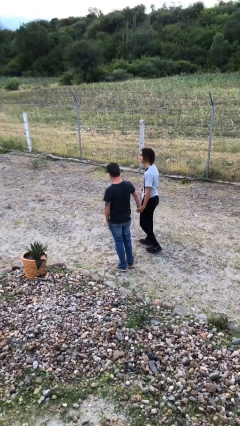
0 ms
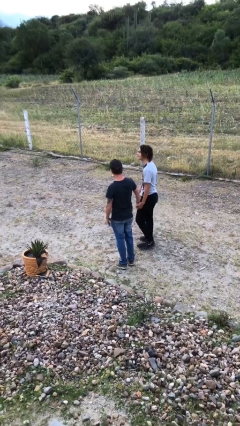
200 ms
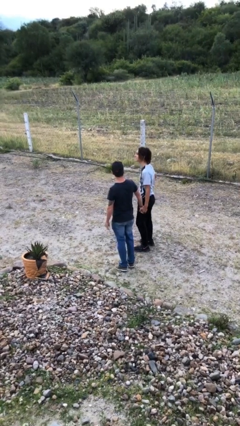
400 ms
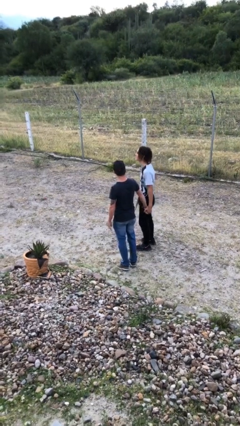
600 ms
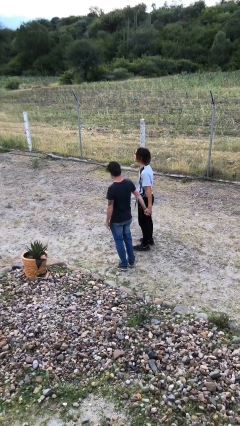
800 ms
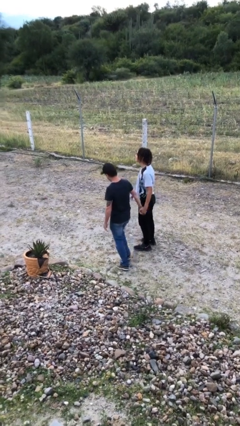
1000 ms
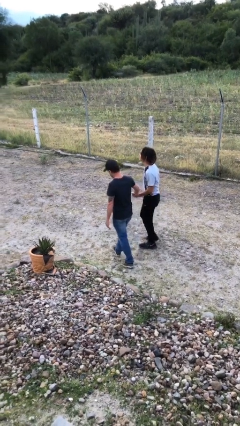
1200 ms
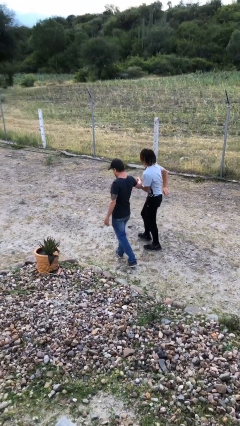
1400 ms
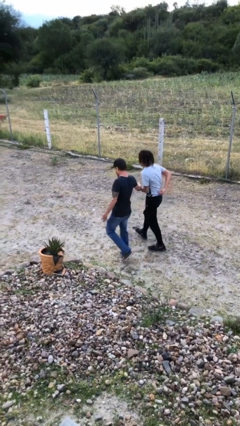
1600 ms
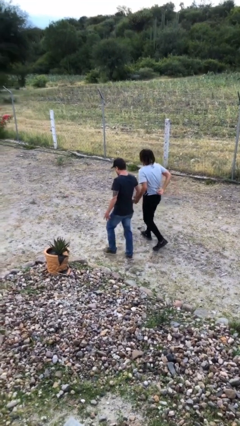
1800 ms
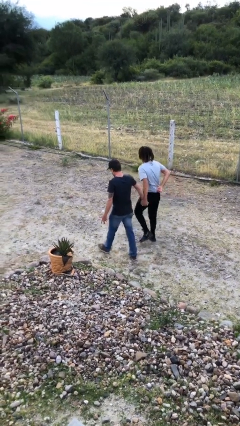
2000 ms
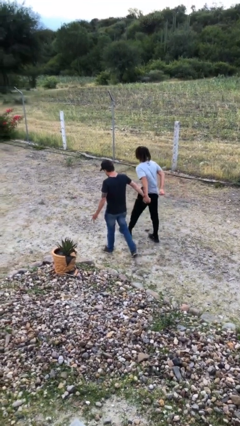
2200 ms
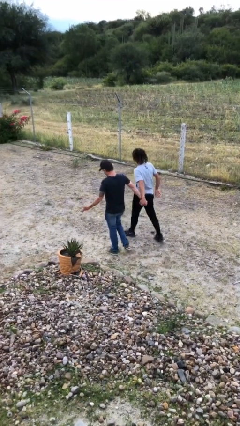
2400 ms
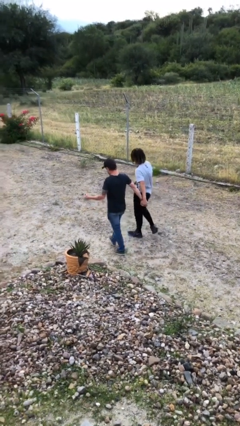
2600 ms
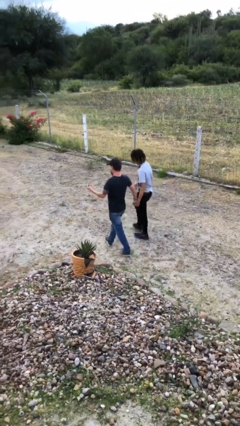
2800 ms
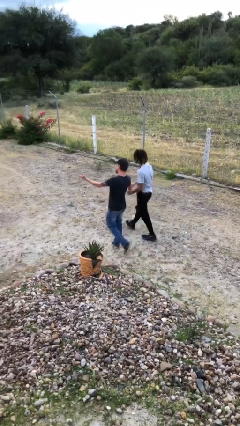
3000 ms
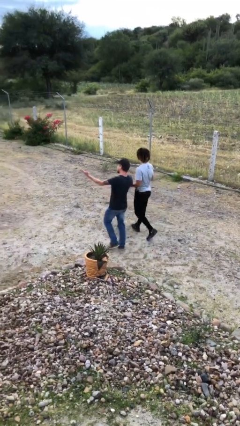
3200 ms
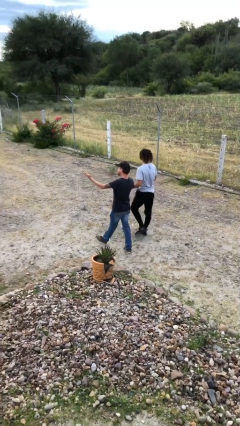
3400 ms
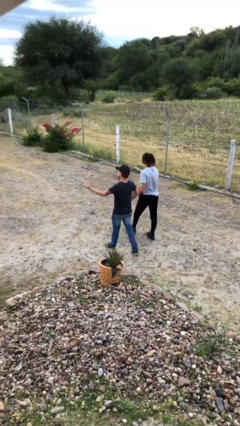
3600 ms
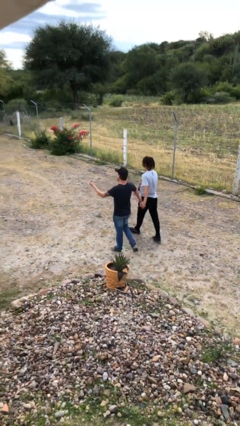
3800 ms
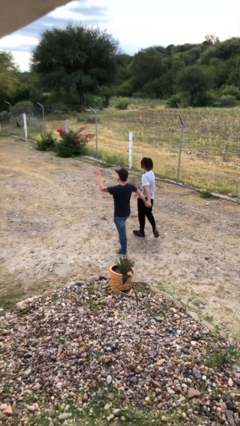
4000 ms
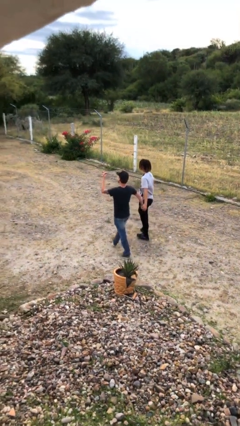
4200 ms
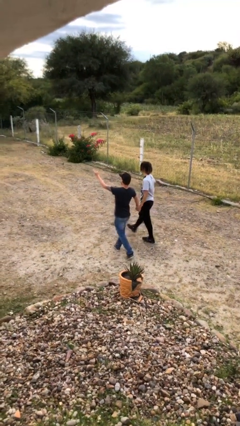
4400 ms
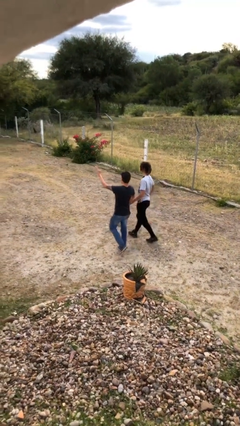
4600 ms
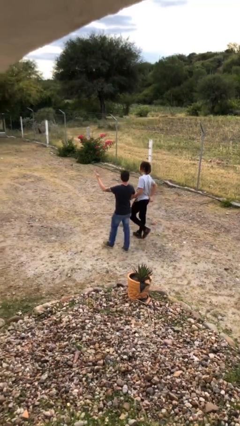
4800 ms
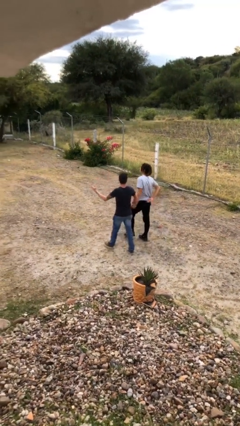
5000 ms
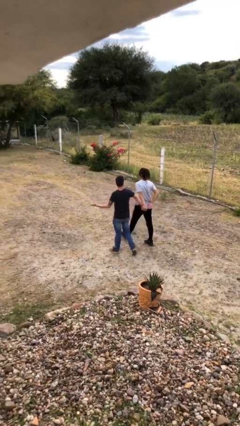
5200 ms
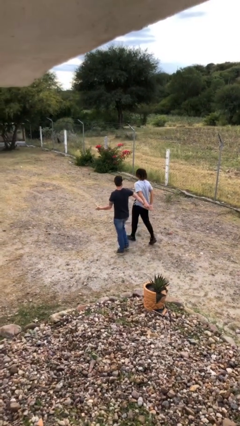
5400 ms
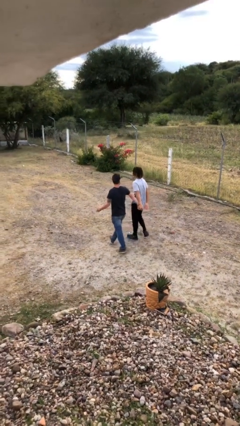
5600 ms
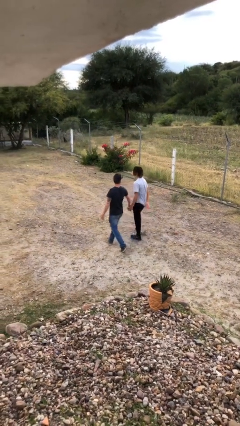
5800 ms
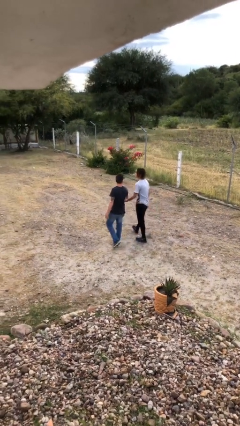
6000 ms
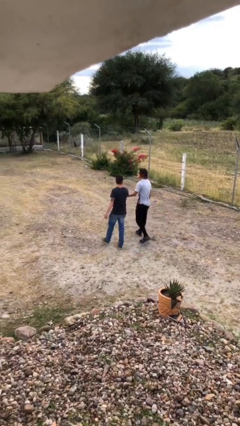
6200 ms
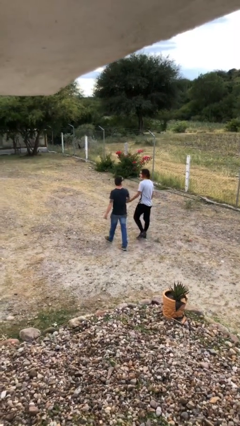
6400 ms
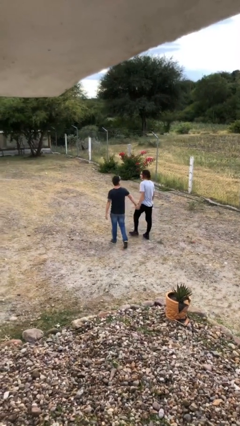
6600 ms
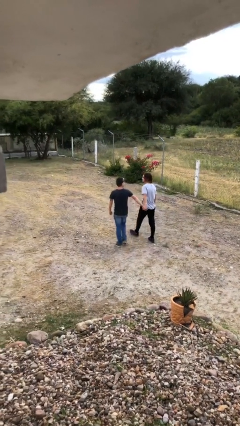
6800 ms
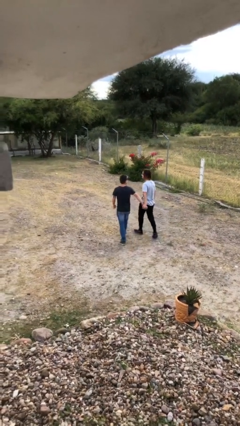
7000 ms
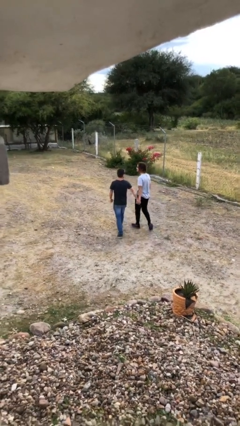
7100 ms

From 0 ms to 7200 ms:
person holds hand

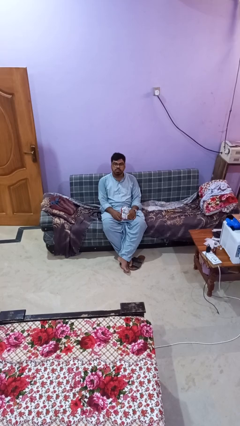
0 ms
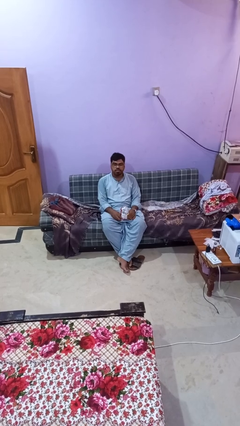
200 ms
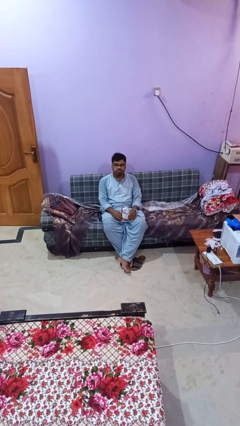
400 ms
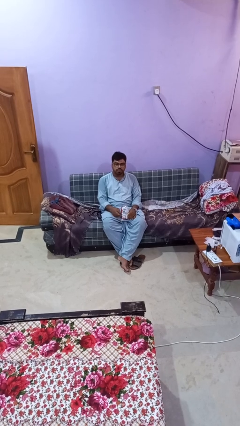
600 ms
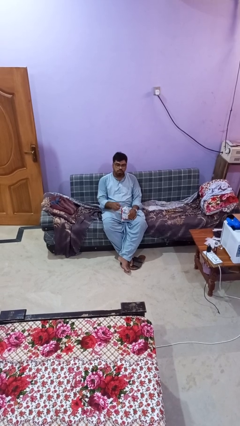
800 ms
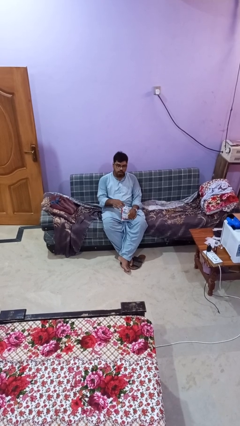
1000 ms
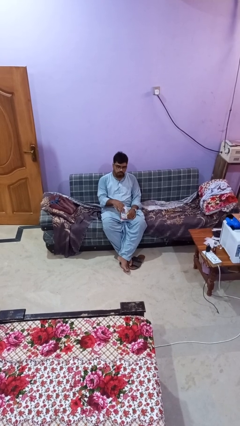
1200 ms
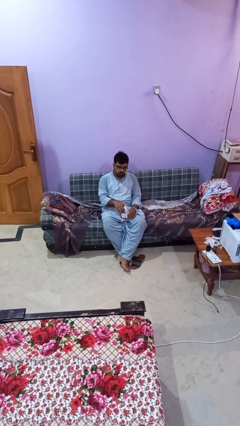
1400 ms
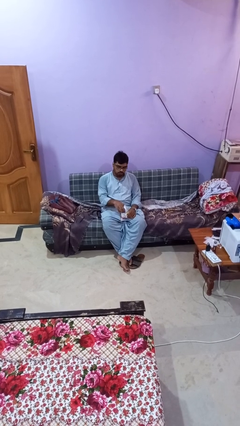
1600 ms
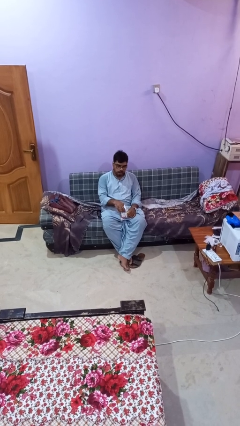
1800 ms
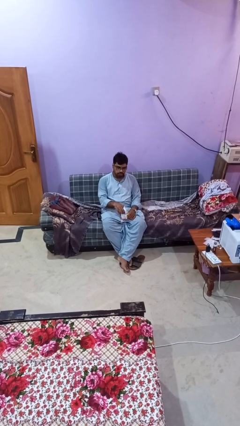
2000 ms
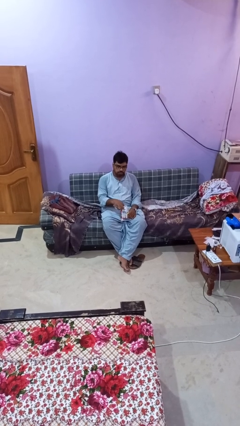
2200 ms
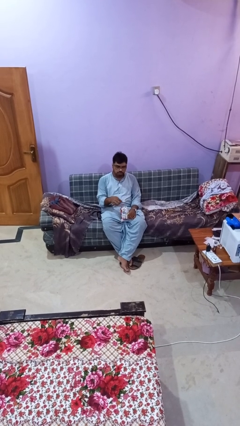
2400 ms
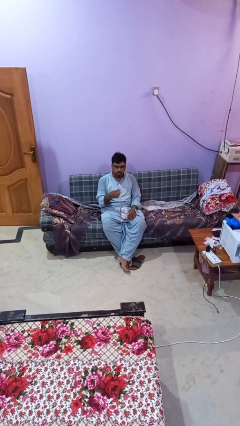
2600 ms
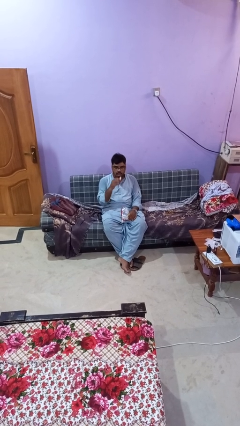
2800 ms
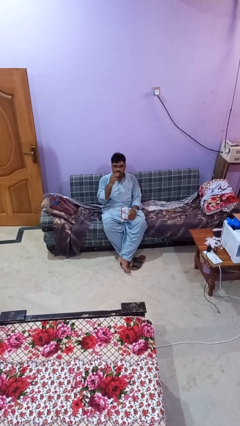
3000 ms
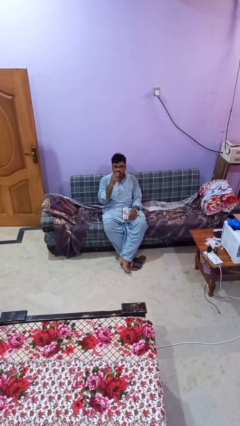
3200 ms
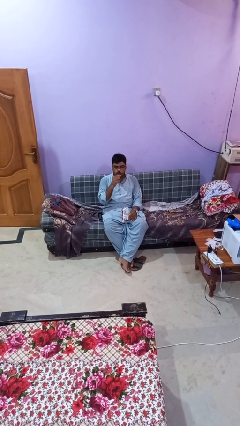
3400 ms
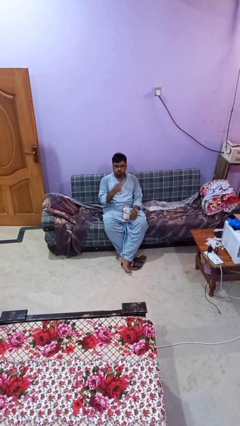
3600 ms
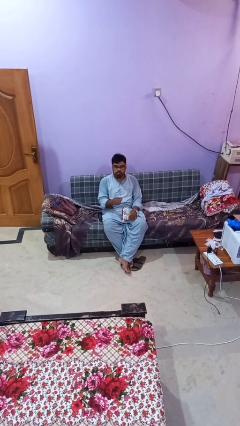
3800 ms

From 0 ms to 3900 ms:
person eats snack from bag

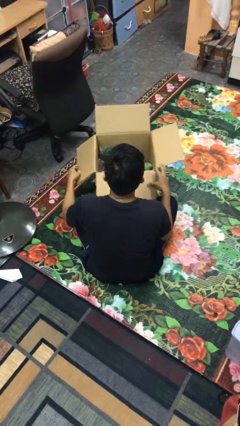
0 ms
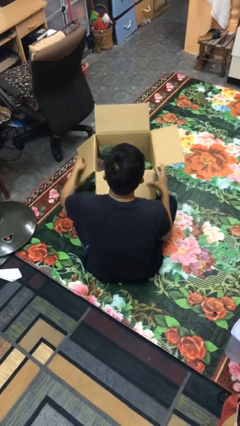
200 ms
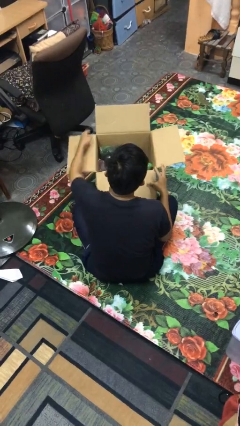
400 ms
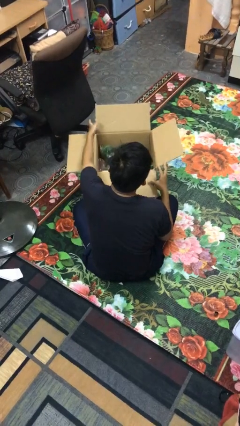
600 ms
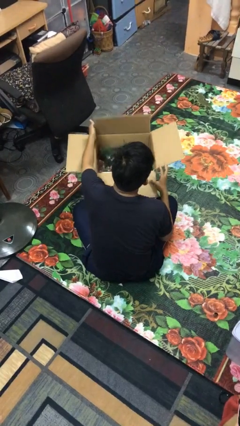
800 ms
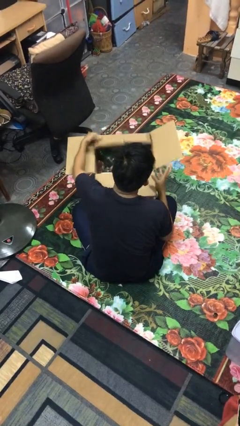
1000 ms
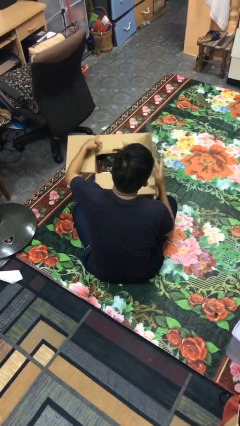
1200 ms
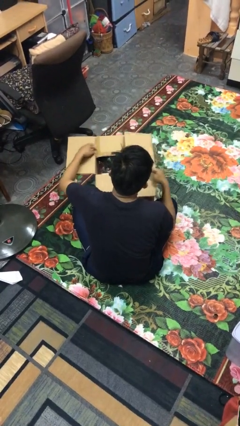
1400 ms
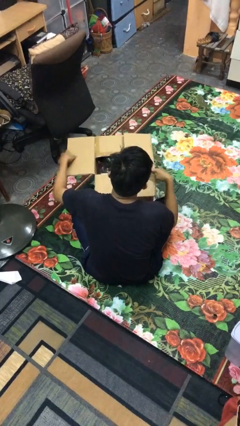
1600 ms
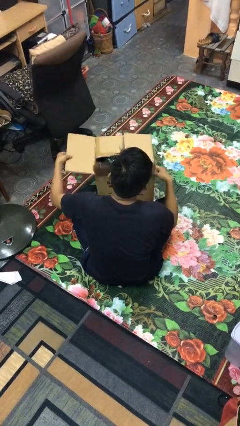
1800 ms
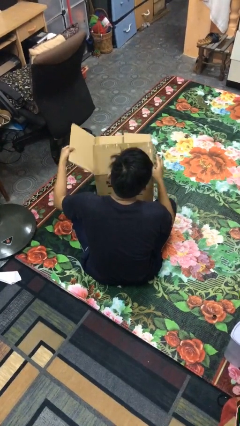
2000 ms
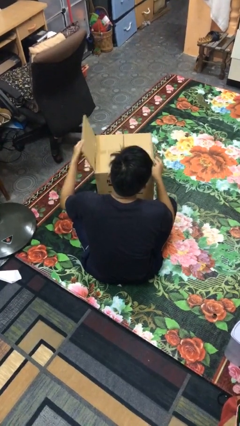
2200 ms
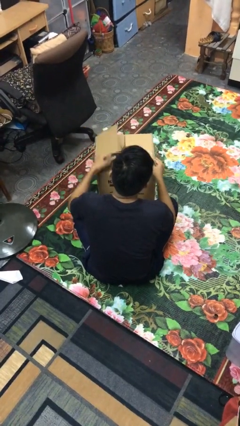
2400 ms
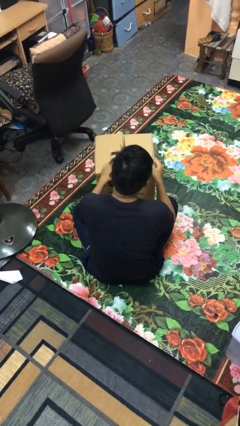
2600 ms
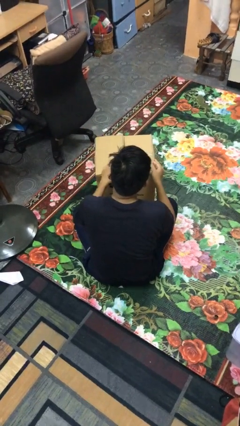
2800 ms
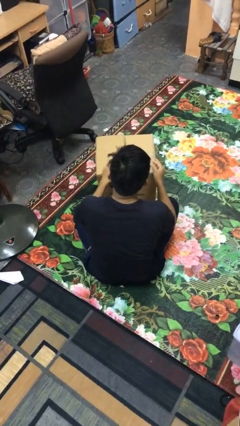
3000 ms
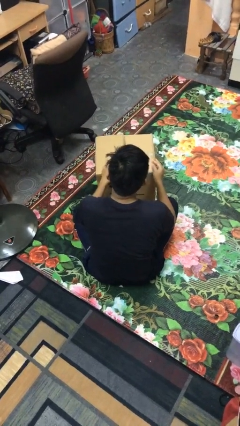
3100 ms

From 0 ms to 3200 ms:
person closes box

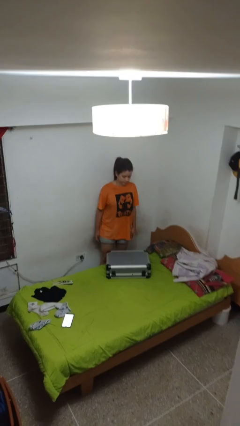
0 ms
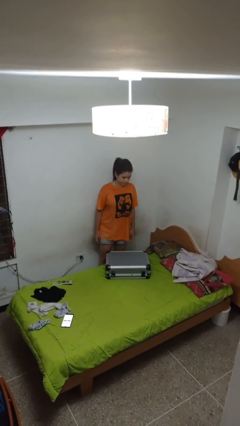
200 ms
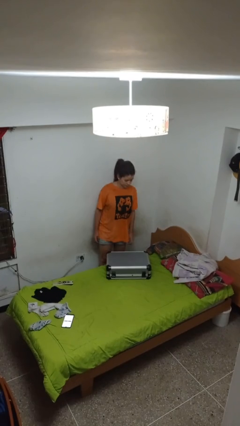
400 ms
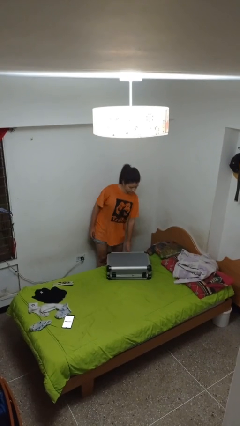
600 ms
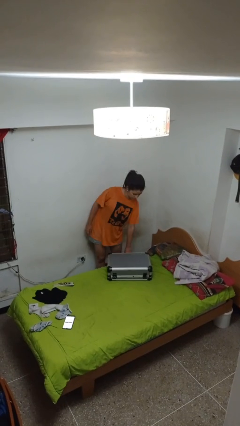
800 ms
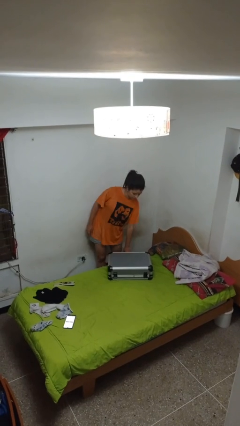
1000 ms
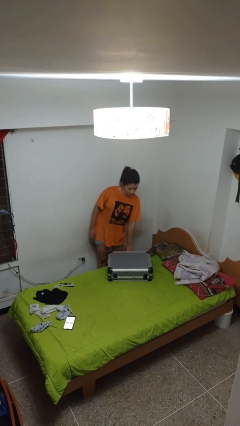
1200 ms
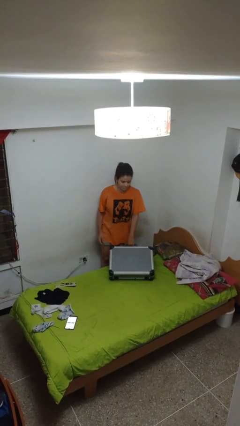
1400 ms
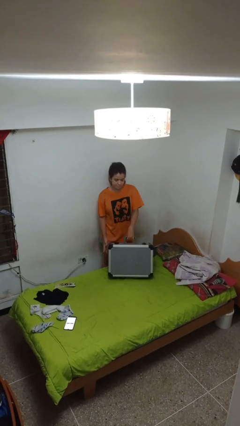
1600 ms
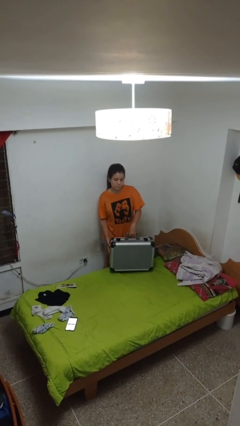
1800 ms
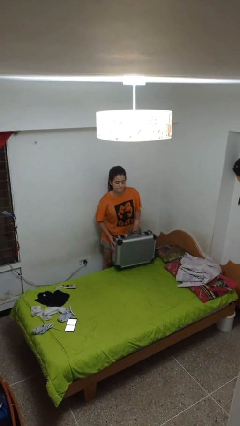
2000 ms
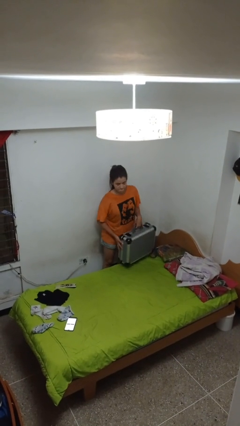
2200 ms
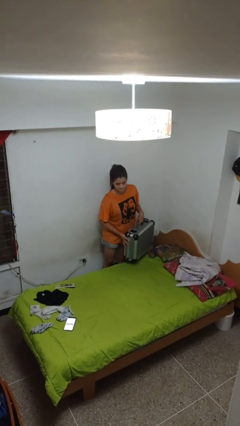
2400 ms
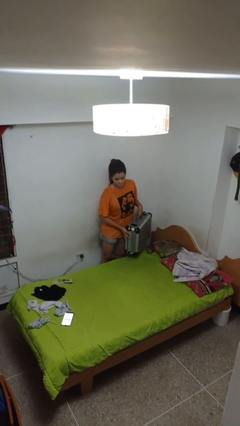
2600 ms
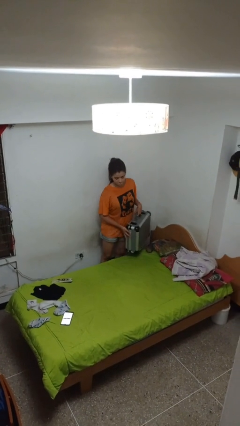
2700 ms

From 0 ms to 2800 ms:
person picks up object from bed

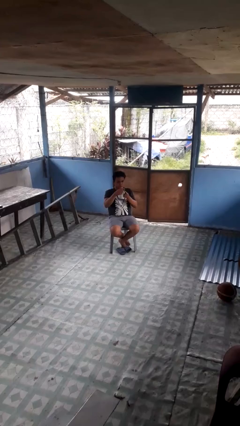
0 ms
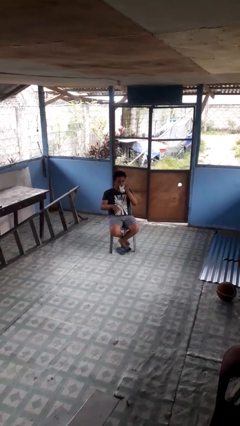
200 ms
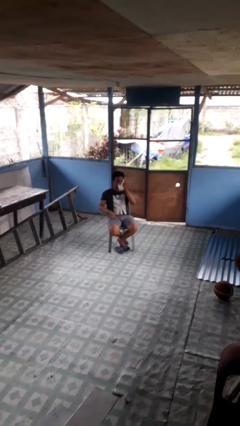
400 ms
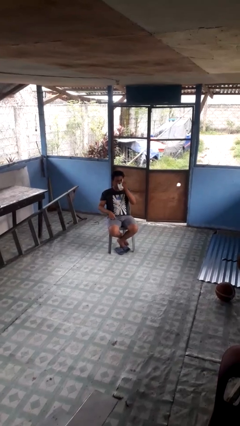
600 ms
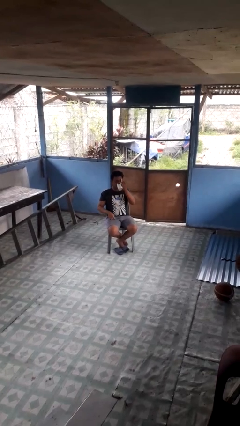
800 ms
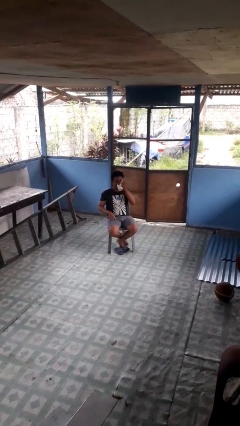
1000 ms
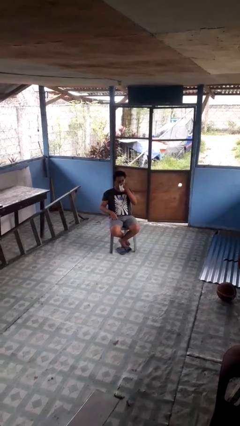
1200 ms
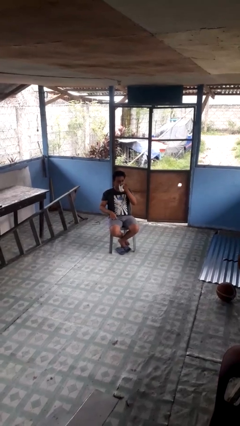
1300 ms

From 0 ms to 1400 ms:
person drinks from mug
